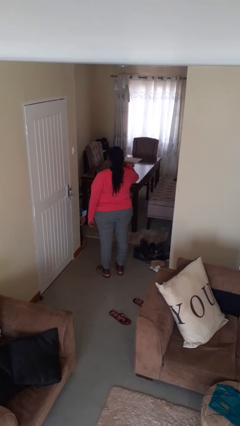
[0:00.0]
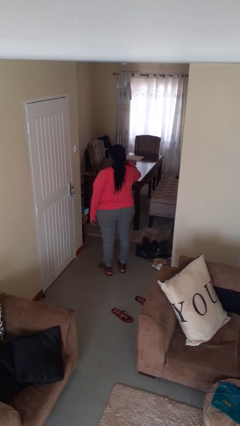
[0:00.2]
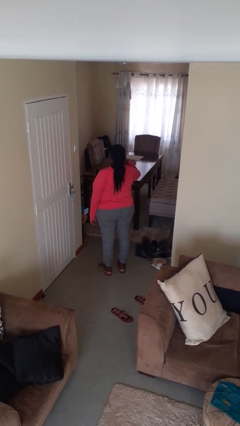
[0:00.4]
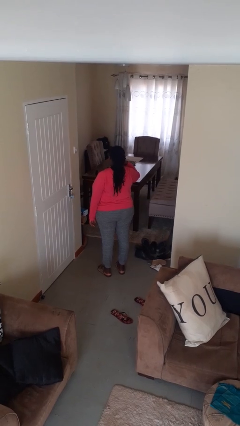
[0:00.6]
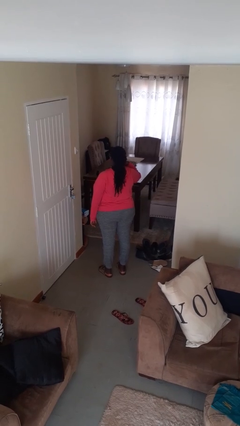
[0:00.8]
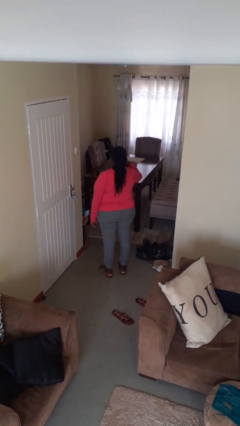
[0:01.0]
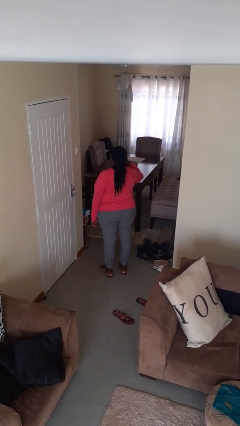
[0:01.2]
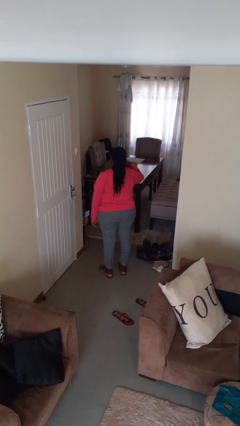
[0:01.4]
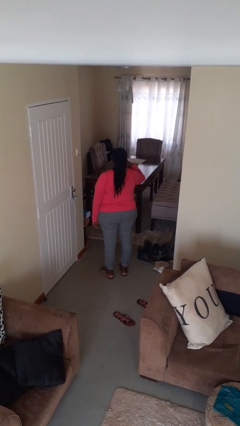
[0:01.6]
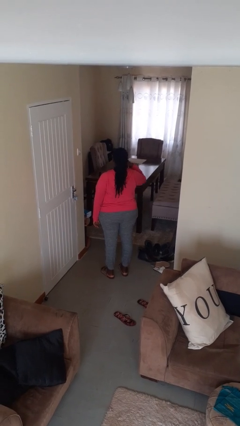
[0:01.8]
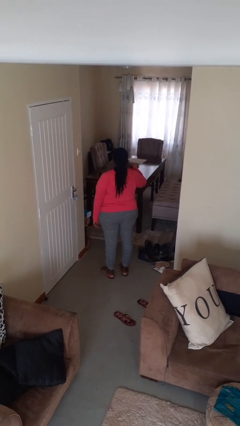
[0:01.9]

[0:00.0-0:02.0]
person gestures call me

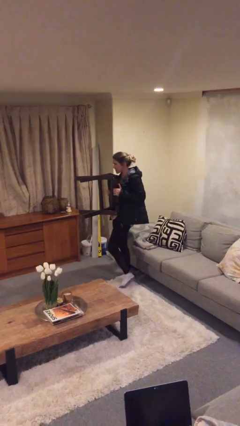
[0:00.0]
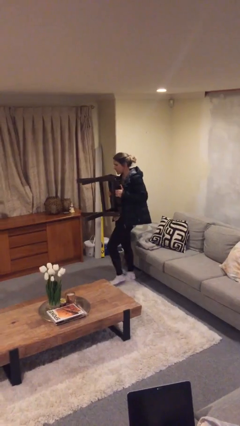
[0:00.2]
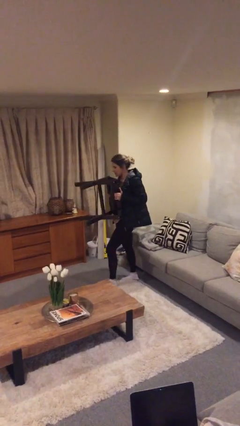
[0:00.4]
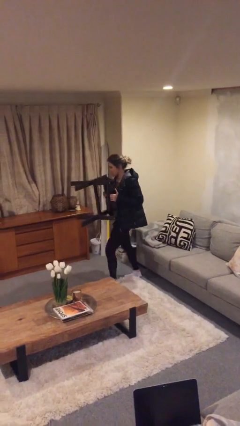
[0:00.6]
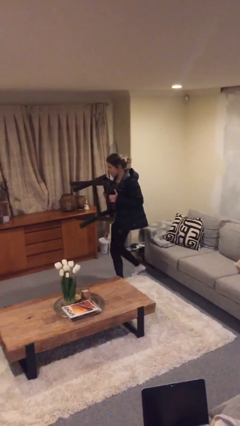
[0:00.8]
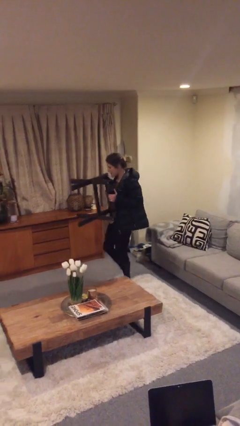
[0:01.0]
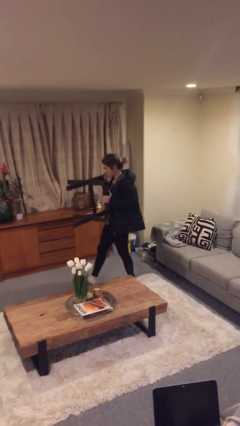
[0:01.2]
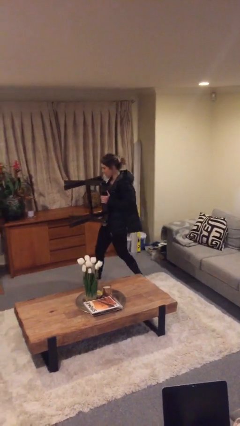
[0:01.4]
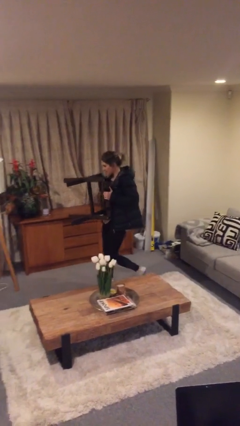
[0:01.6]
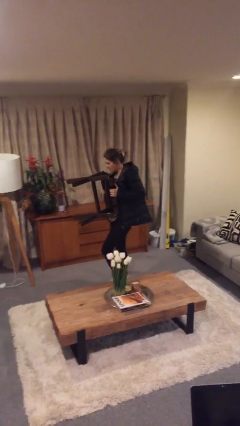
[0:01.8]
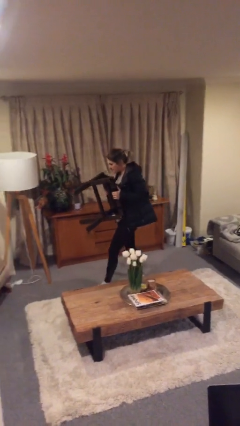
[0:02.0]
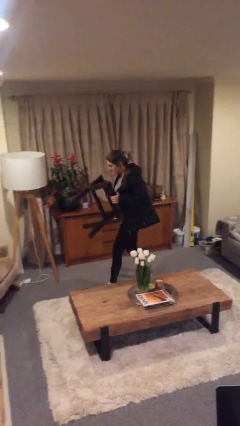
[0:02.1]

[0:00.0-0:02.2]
person carries heavy object

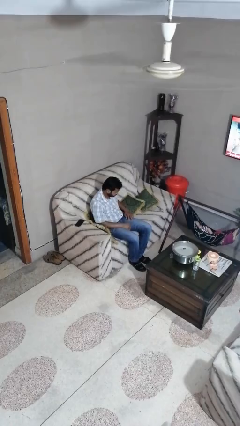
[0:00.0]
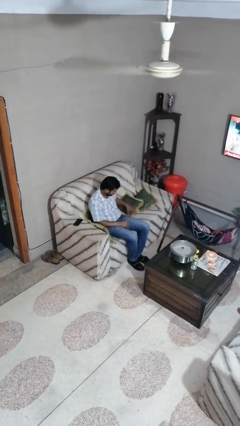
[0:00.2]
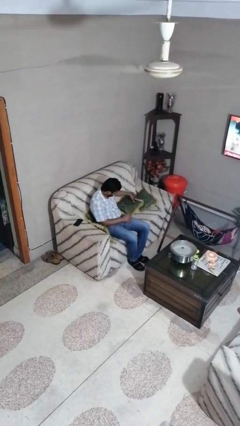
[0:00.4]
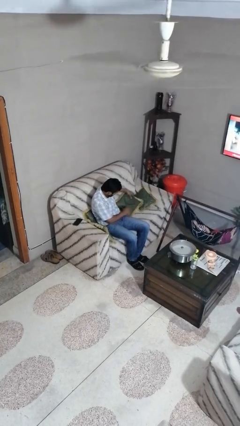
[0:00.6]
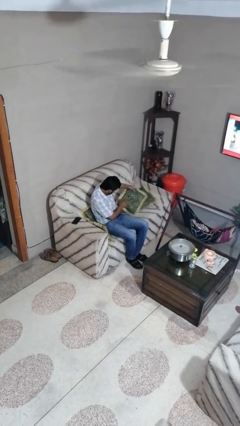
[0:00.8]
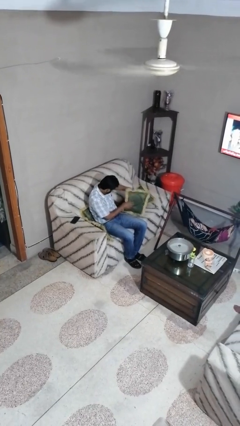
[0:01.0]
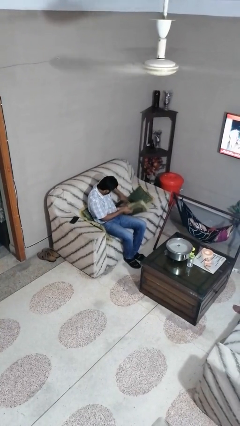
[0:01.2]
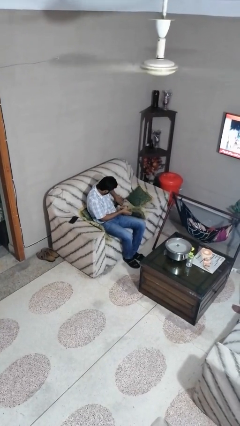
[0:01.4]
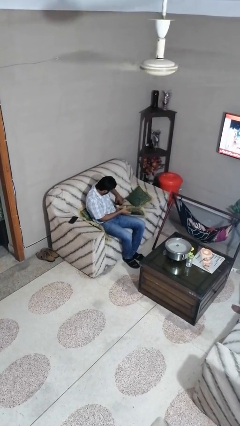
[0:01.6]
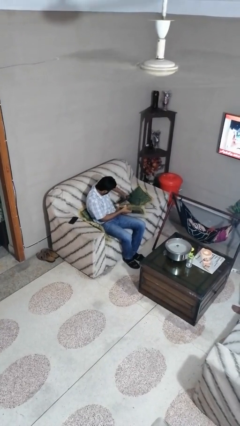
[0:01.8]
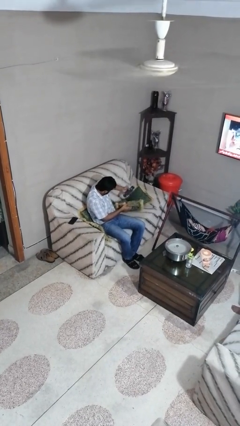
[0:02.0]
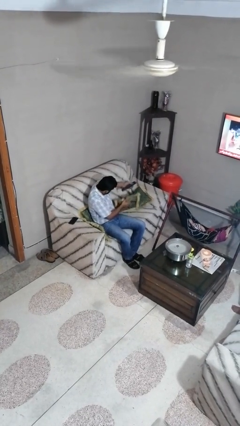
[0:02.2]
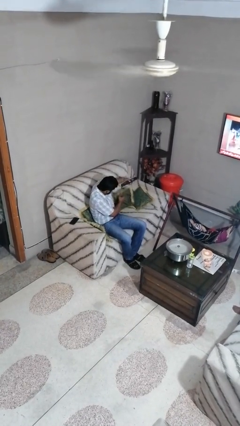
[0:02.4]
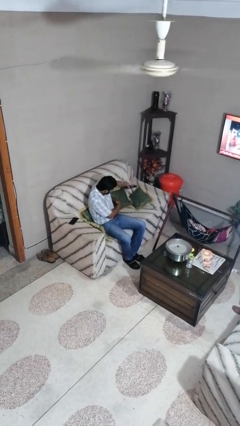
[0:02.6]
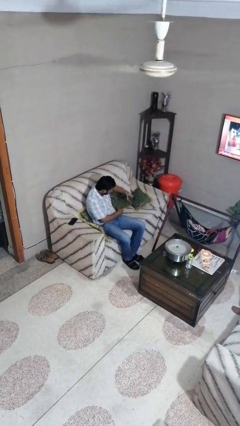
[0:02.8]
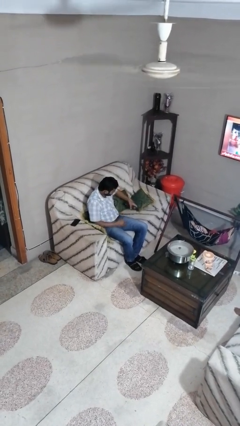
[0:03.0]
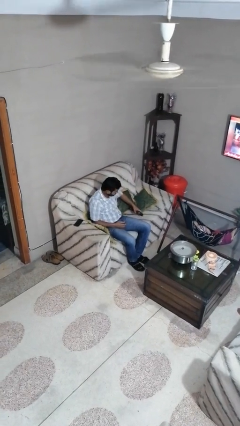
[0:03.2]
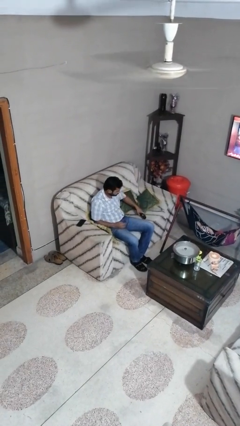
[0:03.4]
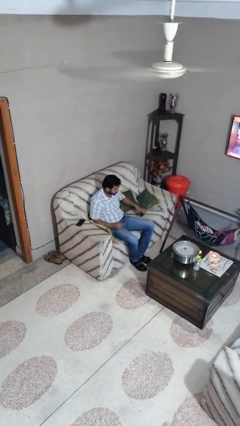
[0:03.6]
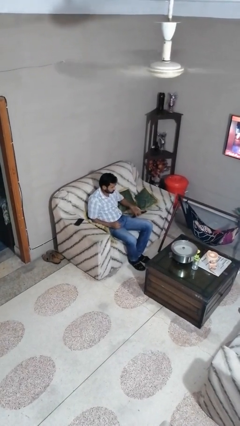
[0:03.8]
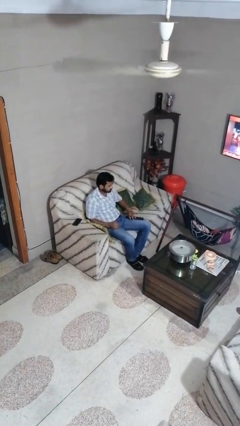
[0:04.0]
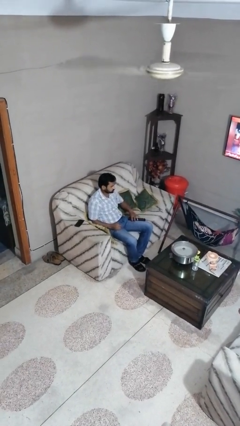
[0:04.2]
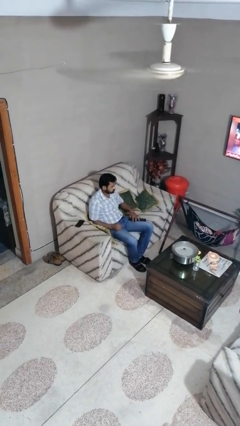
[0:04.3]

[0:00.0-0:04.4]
person searches in couch

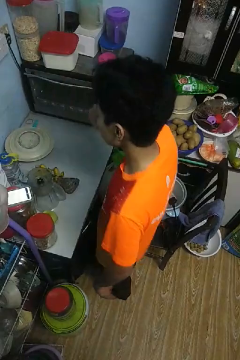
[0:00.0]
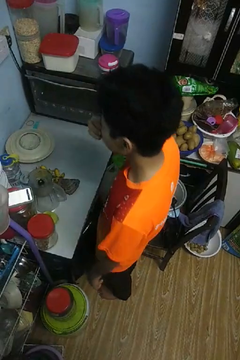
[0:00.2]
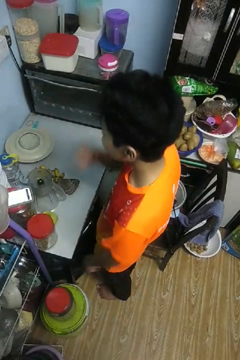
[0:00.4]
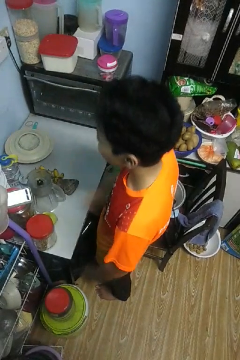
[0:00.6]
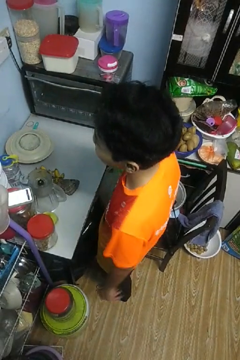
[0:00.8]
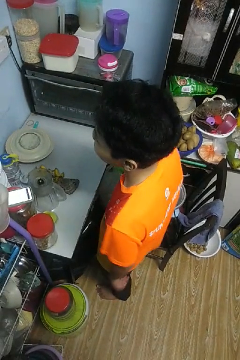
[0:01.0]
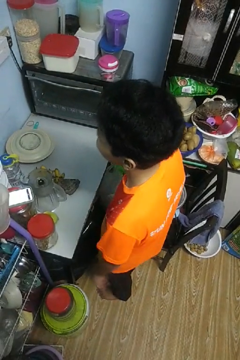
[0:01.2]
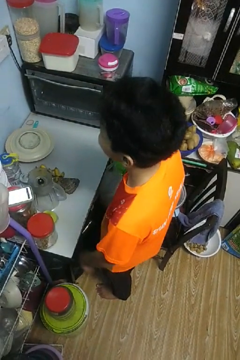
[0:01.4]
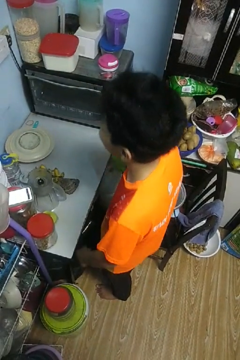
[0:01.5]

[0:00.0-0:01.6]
person burns hand

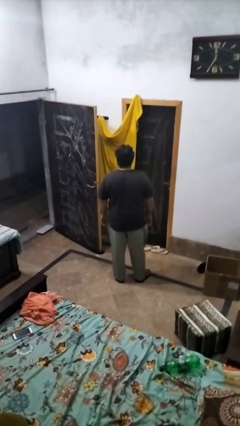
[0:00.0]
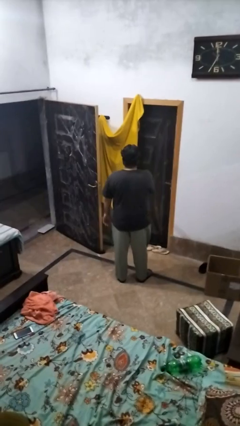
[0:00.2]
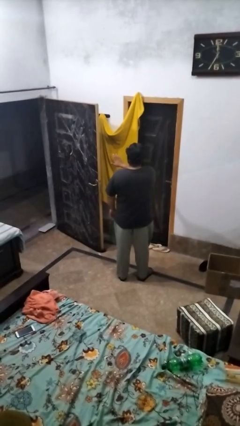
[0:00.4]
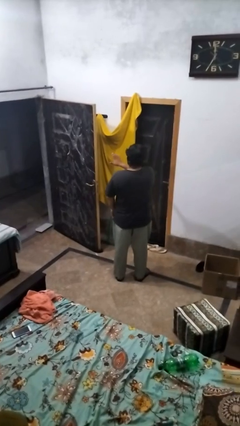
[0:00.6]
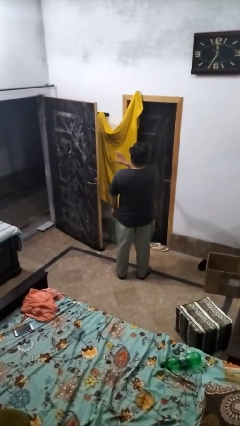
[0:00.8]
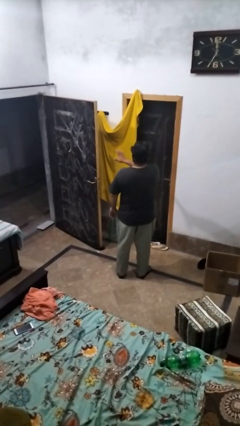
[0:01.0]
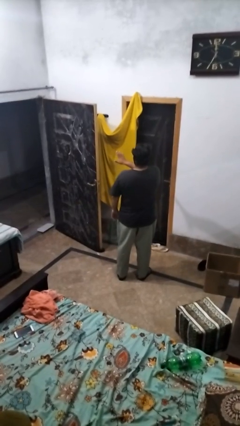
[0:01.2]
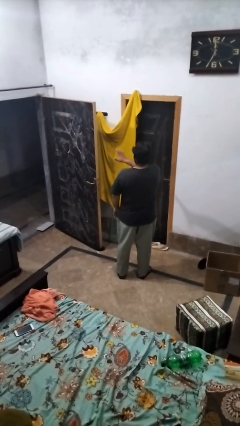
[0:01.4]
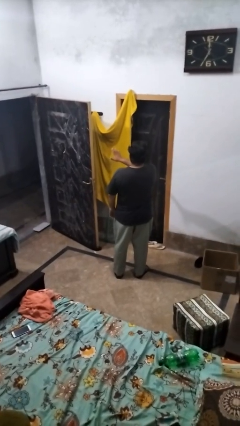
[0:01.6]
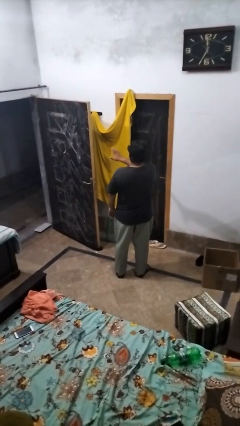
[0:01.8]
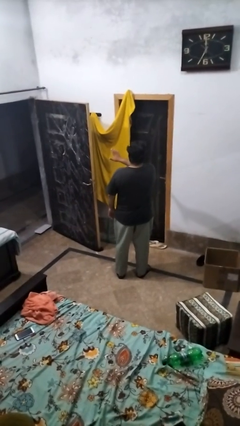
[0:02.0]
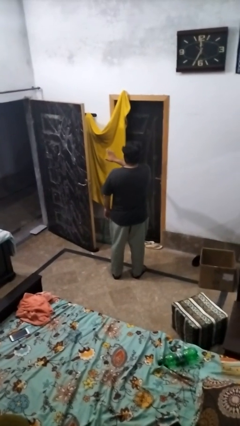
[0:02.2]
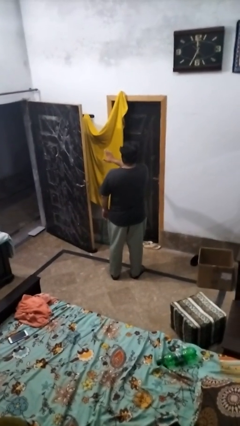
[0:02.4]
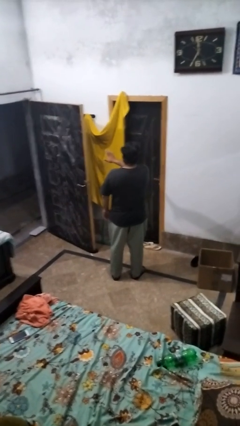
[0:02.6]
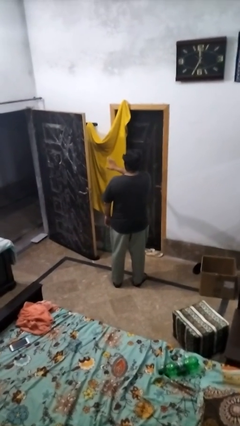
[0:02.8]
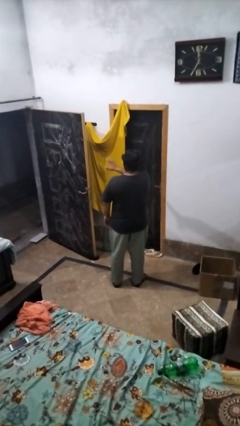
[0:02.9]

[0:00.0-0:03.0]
person gestures stop

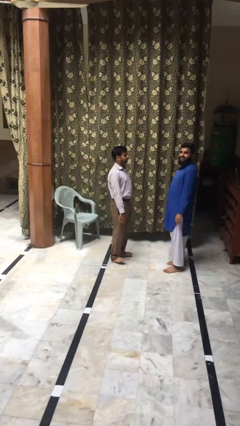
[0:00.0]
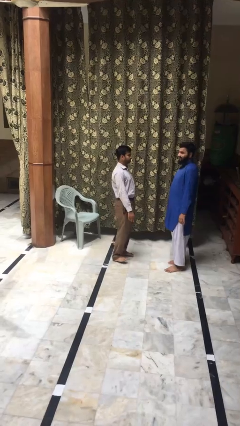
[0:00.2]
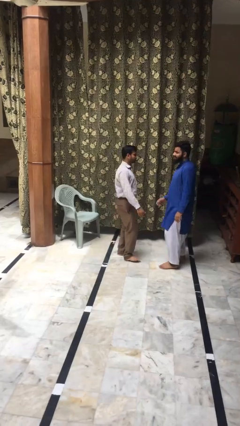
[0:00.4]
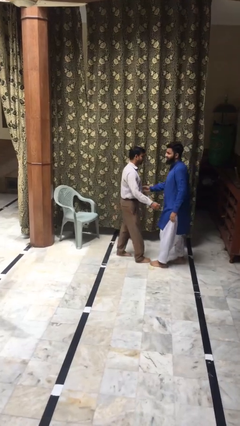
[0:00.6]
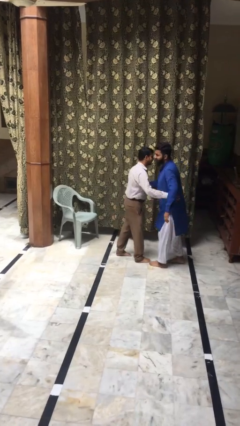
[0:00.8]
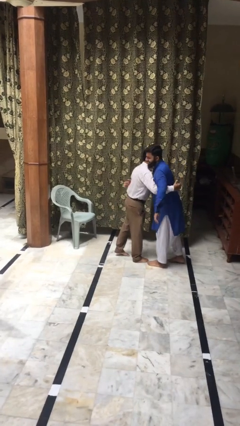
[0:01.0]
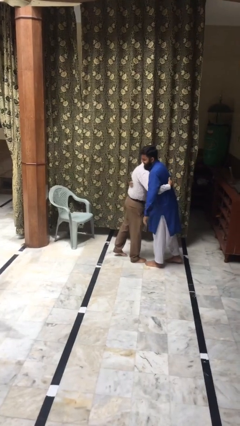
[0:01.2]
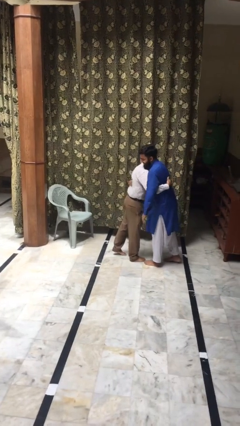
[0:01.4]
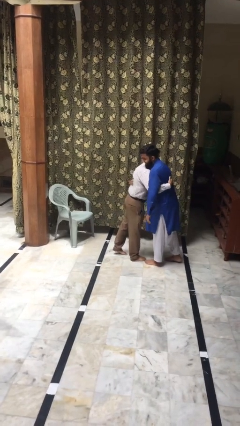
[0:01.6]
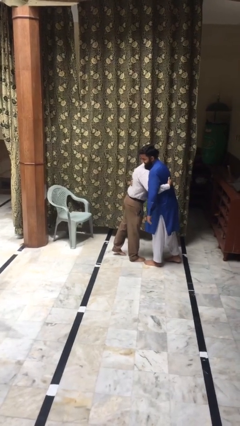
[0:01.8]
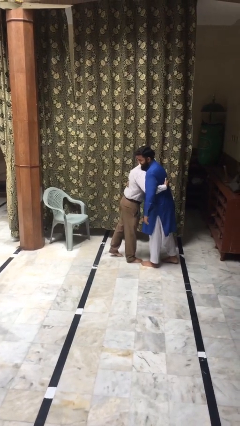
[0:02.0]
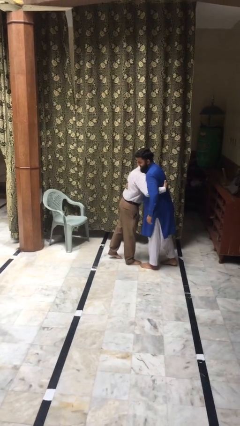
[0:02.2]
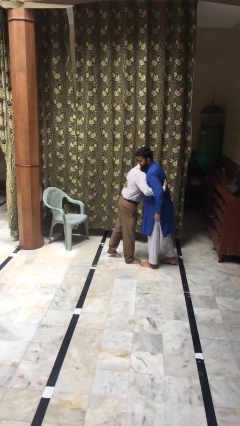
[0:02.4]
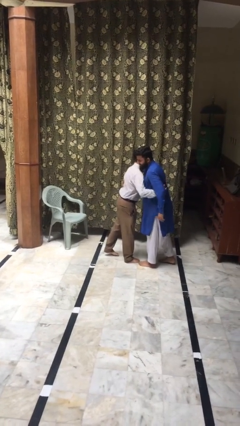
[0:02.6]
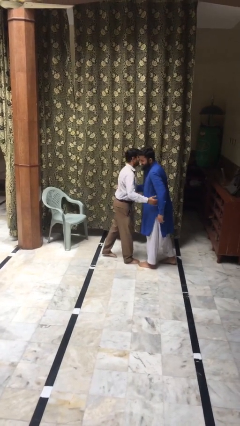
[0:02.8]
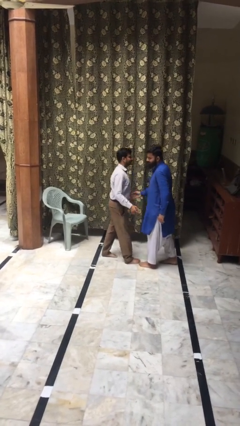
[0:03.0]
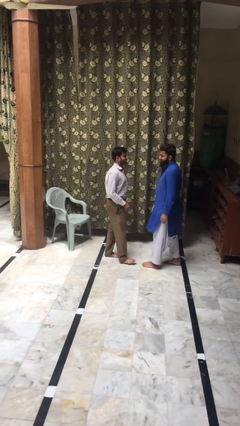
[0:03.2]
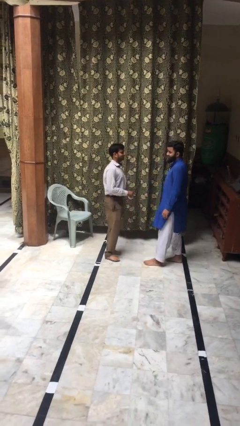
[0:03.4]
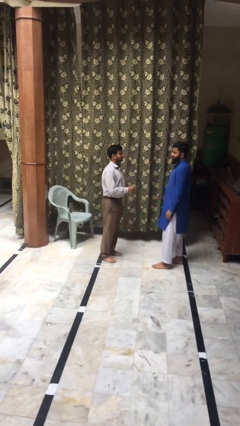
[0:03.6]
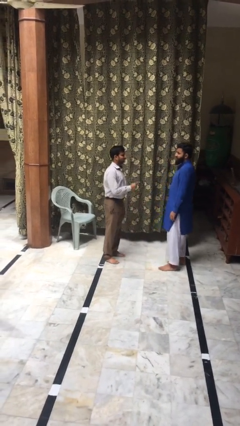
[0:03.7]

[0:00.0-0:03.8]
person embraces person

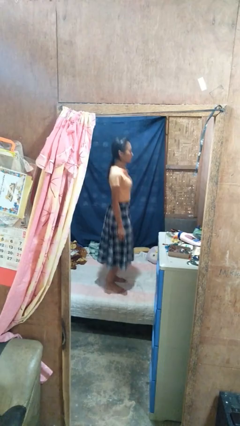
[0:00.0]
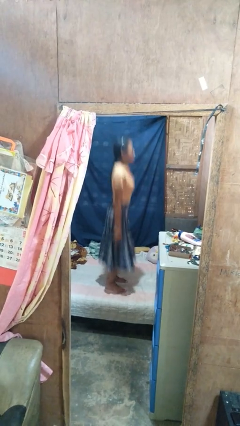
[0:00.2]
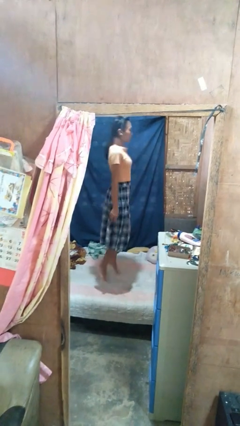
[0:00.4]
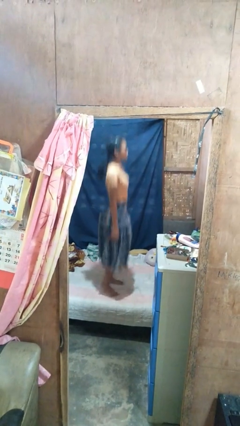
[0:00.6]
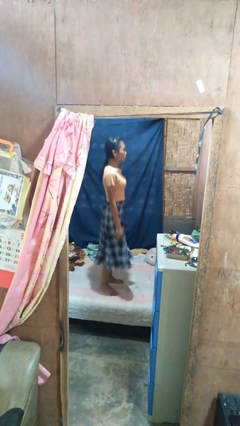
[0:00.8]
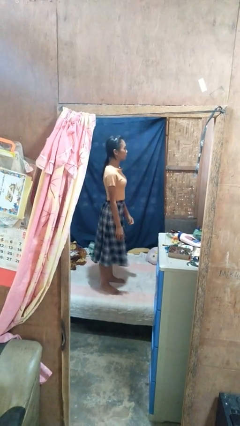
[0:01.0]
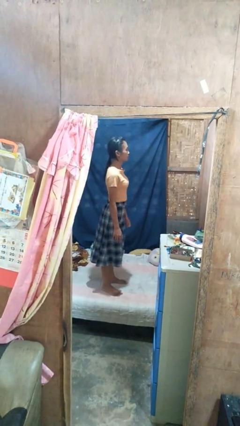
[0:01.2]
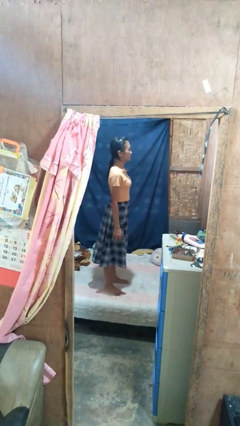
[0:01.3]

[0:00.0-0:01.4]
person jumps on bed
